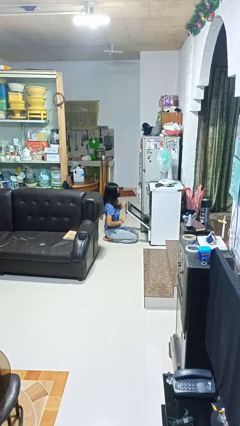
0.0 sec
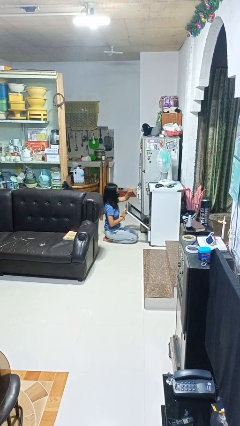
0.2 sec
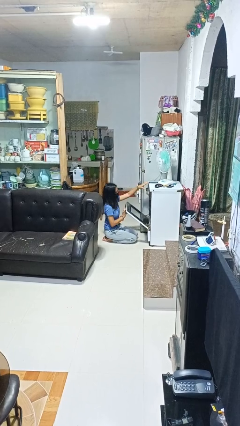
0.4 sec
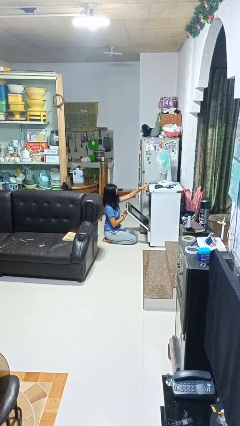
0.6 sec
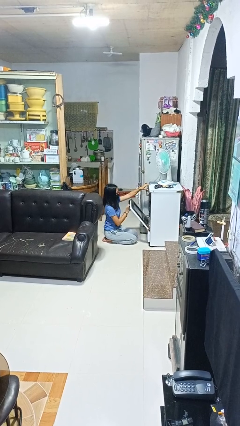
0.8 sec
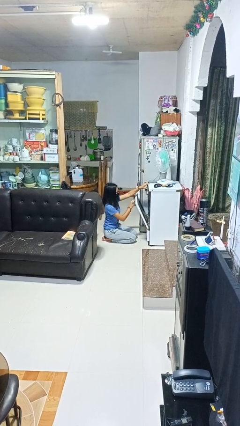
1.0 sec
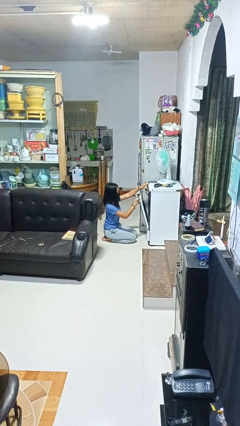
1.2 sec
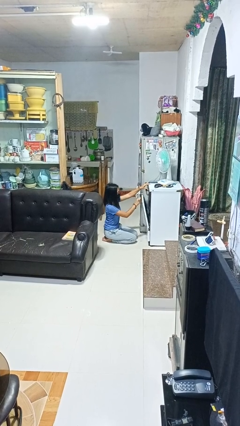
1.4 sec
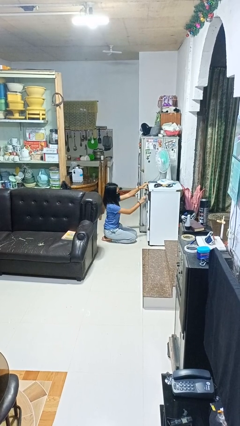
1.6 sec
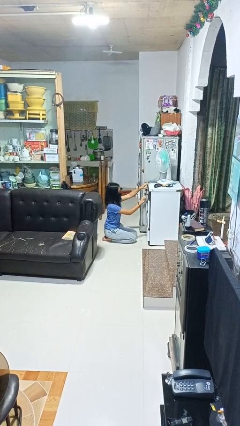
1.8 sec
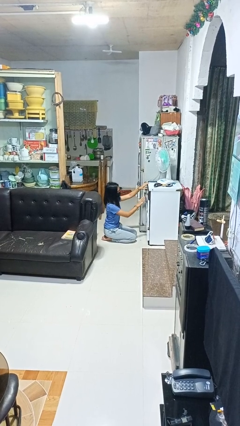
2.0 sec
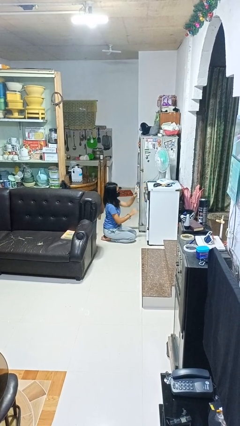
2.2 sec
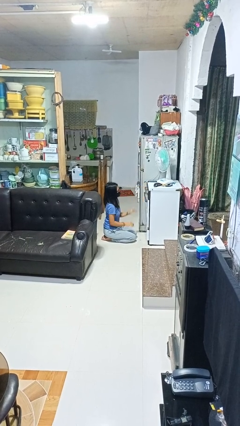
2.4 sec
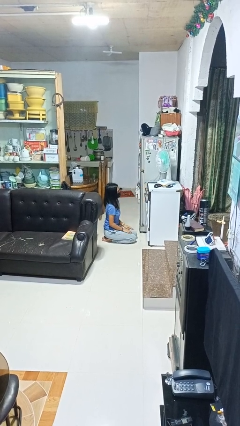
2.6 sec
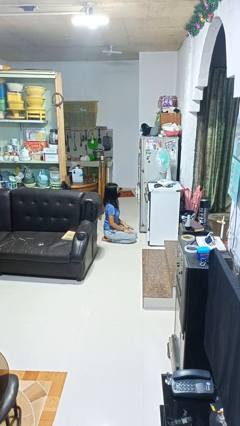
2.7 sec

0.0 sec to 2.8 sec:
person closes oven door

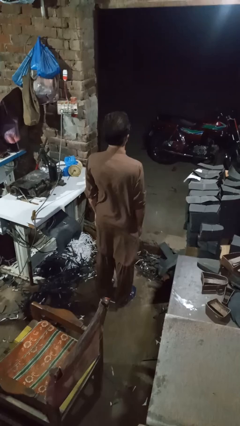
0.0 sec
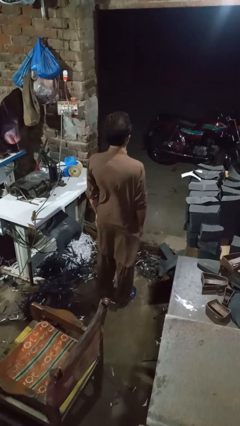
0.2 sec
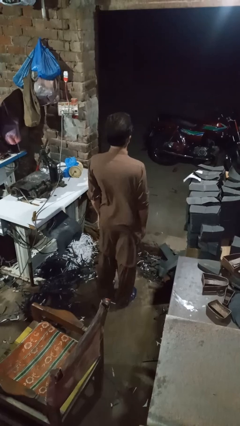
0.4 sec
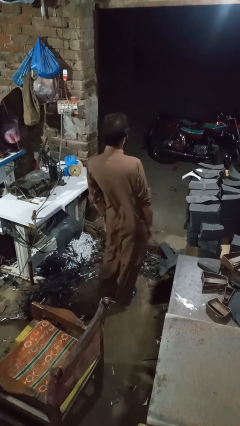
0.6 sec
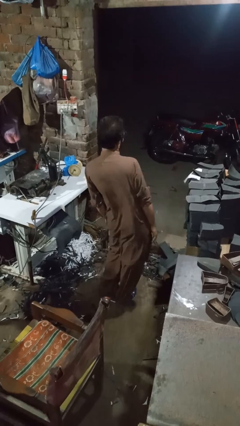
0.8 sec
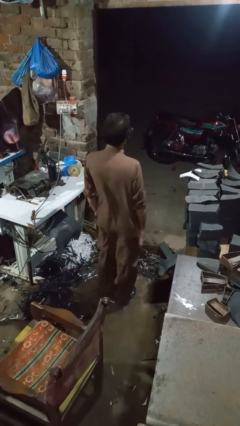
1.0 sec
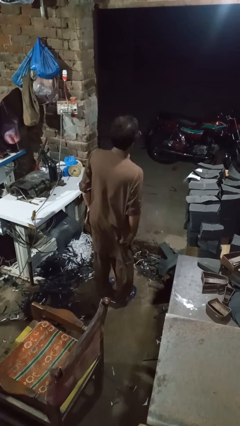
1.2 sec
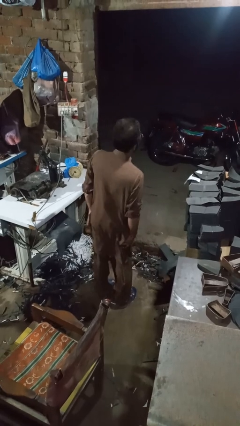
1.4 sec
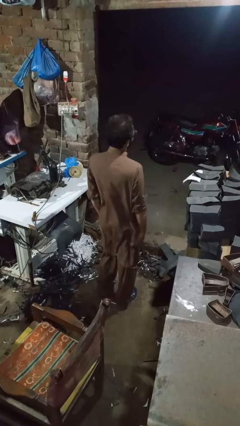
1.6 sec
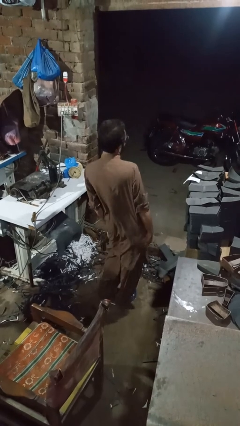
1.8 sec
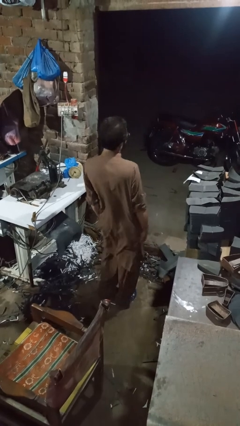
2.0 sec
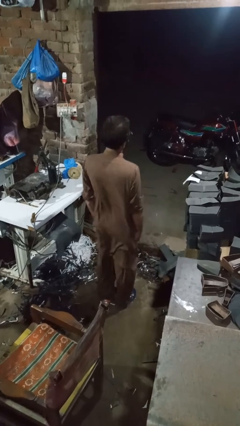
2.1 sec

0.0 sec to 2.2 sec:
person wiggles hips

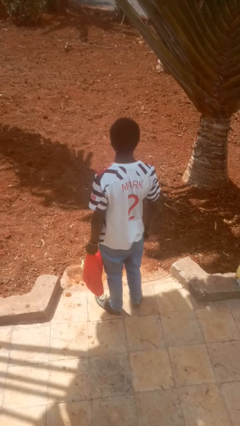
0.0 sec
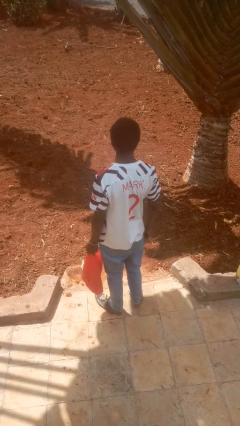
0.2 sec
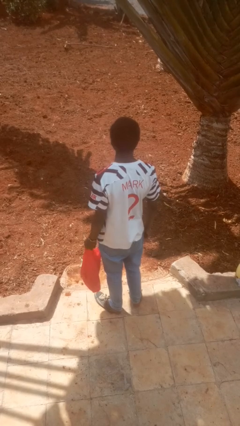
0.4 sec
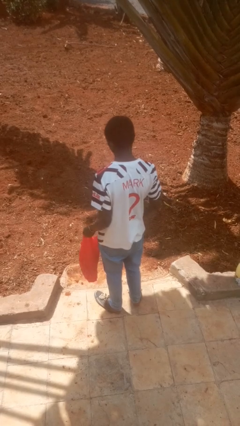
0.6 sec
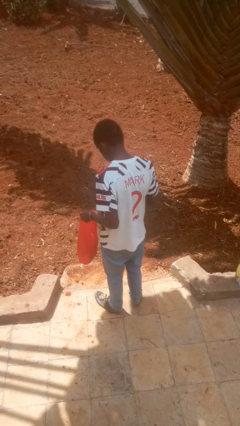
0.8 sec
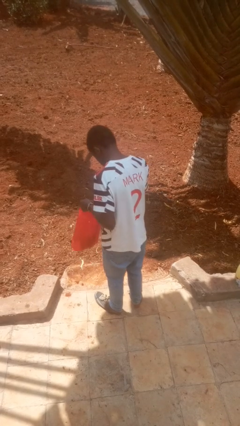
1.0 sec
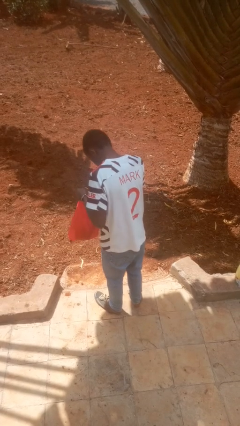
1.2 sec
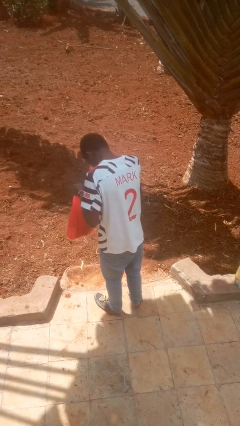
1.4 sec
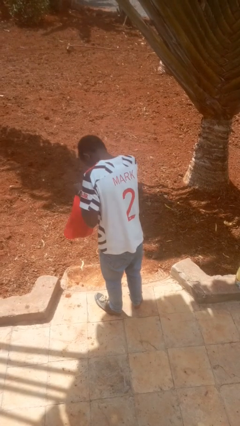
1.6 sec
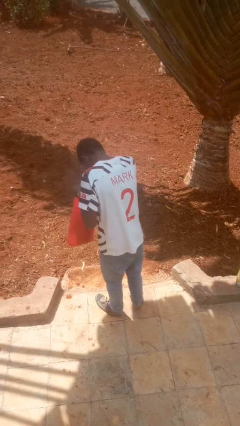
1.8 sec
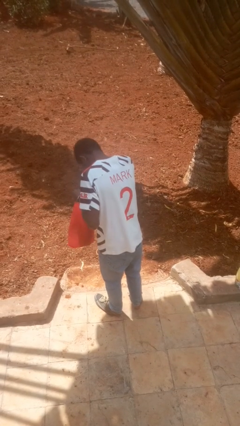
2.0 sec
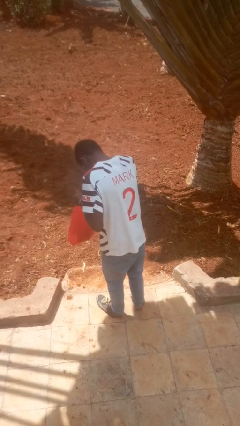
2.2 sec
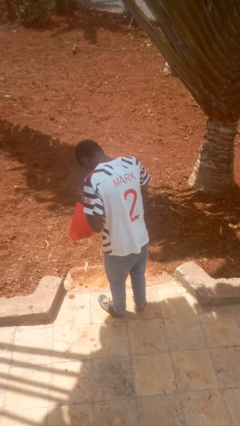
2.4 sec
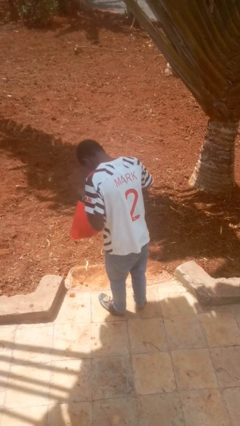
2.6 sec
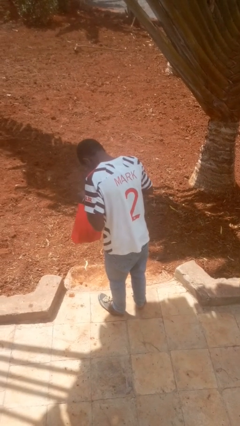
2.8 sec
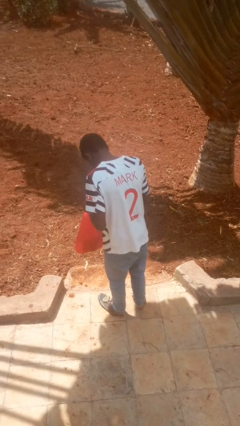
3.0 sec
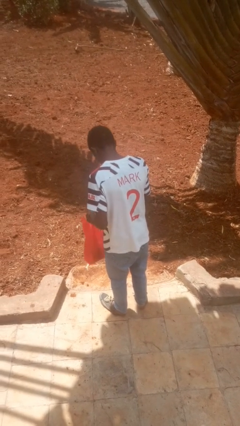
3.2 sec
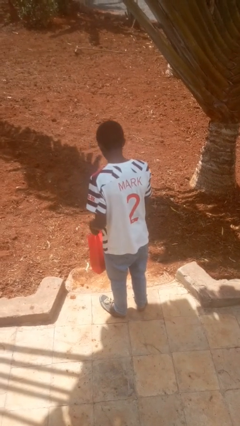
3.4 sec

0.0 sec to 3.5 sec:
person searches in bag

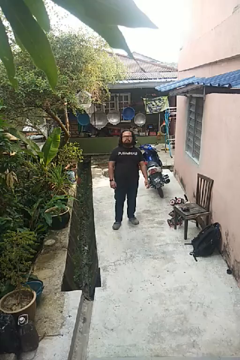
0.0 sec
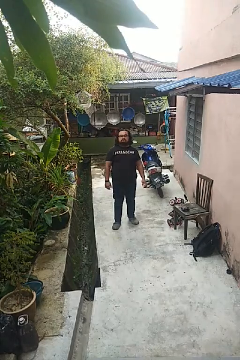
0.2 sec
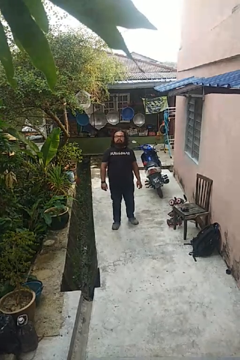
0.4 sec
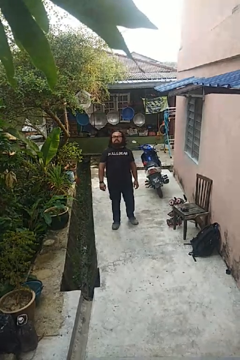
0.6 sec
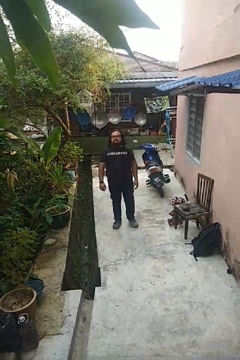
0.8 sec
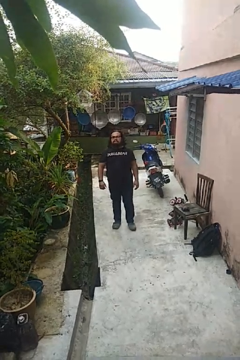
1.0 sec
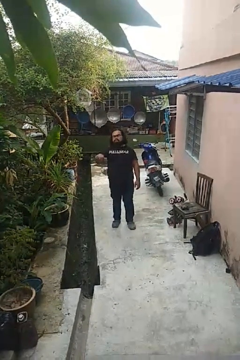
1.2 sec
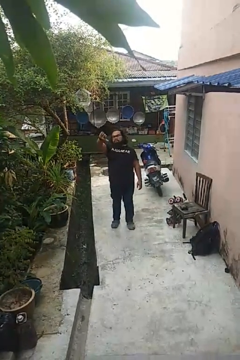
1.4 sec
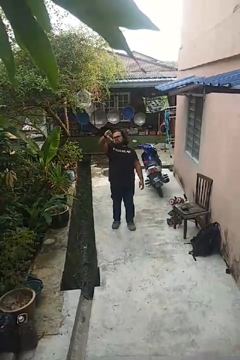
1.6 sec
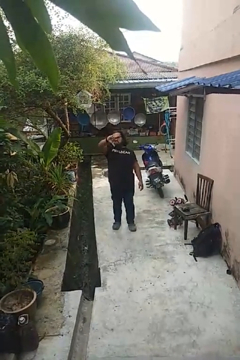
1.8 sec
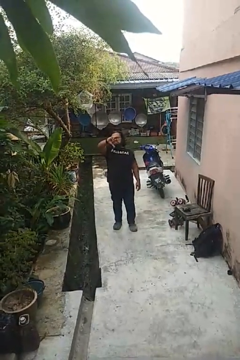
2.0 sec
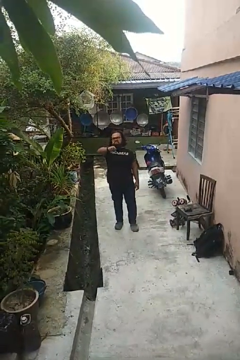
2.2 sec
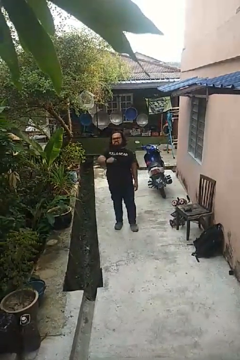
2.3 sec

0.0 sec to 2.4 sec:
person gestures thumbs down

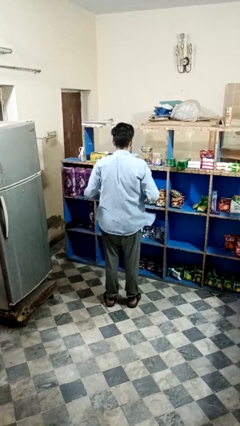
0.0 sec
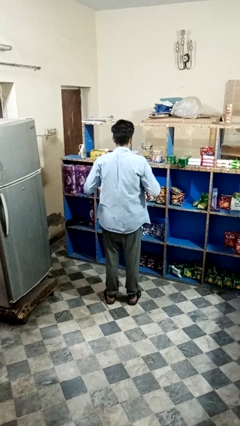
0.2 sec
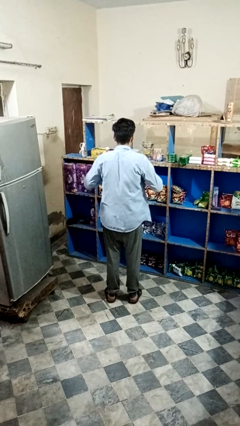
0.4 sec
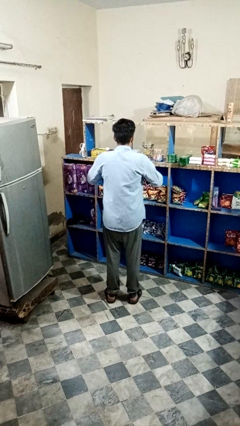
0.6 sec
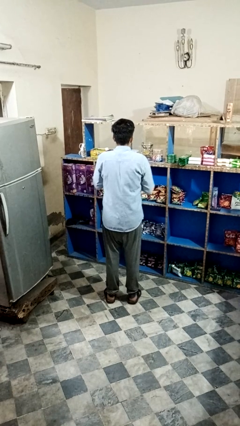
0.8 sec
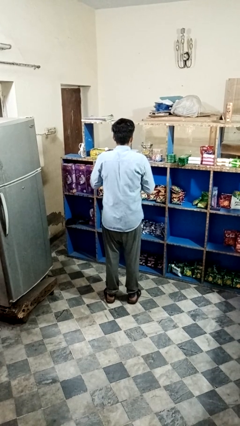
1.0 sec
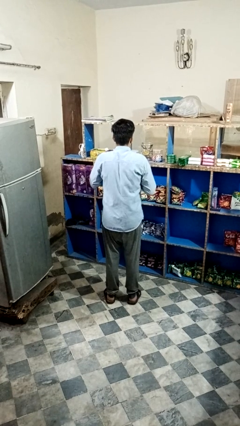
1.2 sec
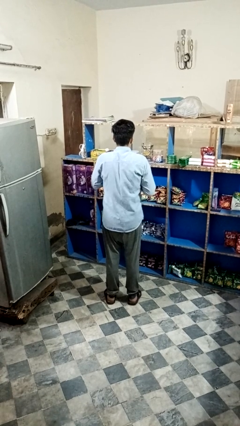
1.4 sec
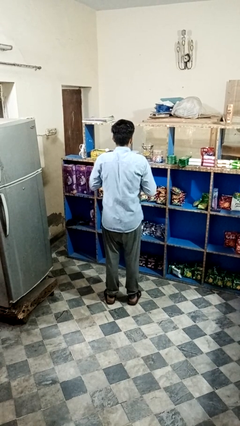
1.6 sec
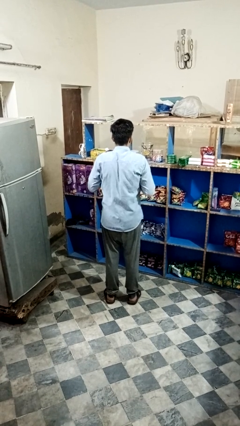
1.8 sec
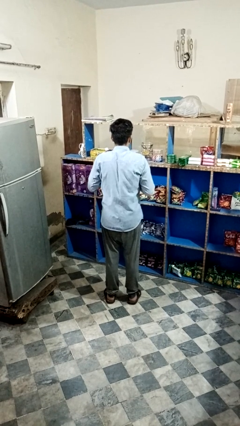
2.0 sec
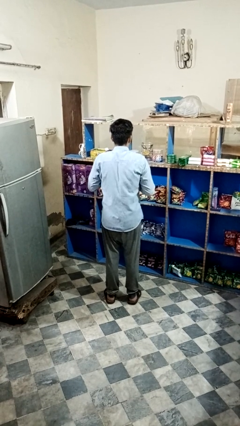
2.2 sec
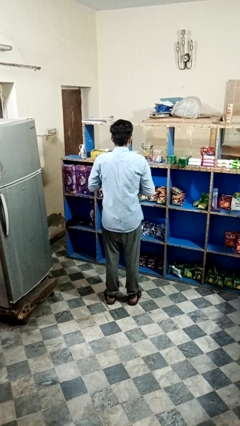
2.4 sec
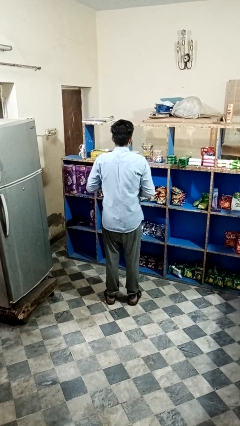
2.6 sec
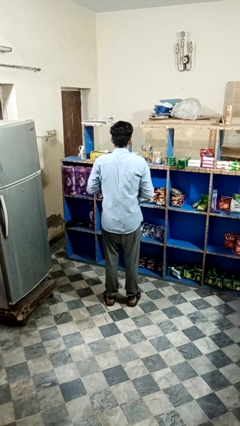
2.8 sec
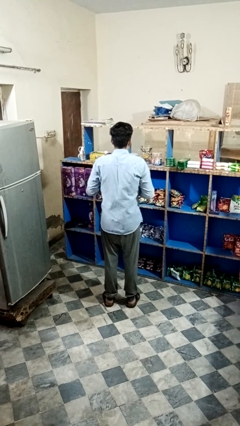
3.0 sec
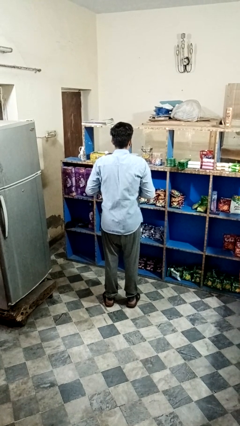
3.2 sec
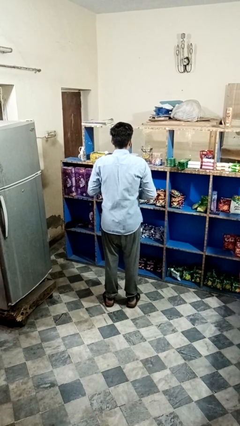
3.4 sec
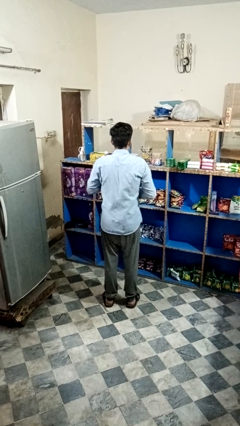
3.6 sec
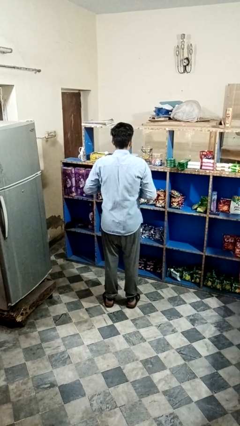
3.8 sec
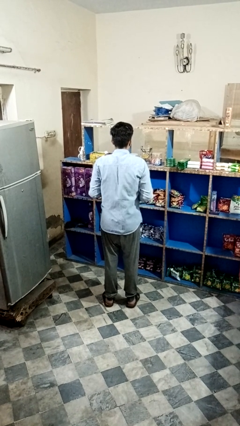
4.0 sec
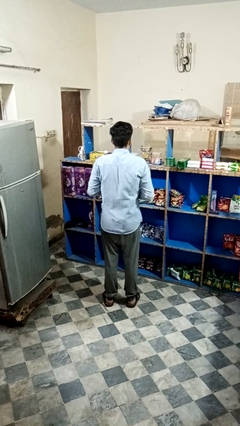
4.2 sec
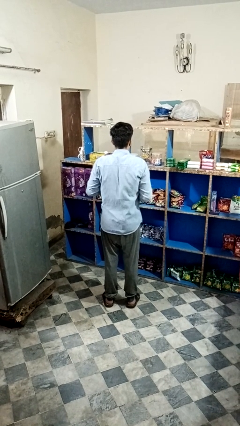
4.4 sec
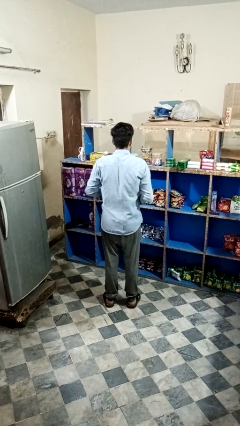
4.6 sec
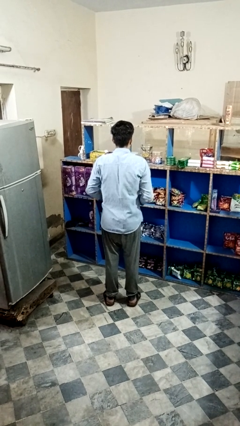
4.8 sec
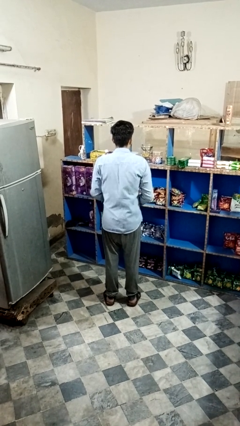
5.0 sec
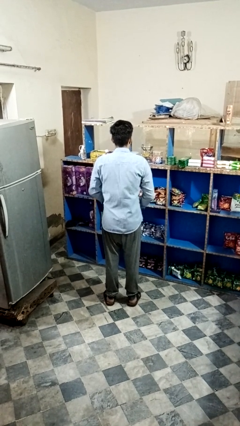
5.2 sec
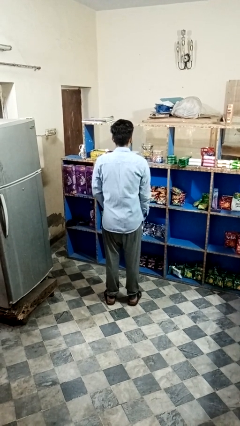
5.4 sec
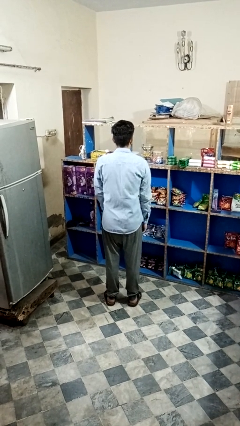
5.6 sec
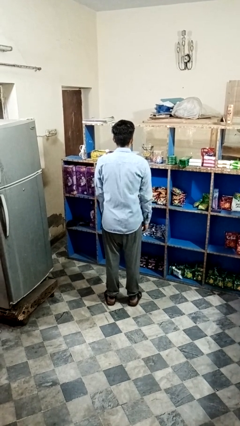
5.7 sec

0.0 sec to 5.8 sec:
person buttons shirt

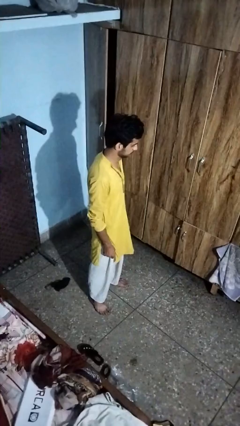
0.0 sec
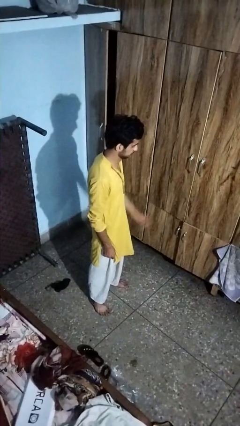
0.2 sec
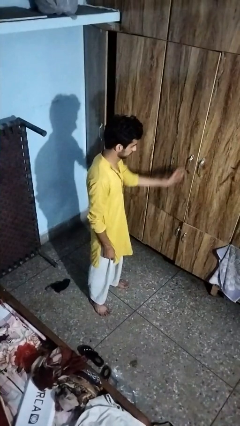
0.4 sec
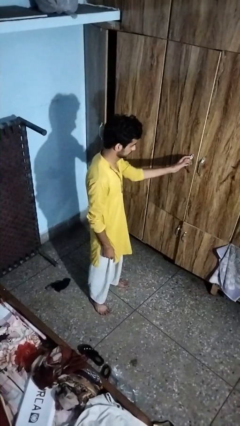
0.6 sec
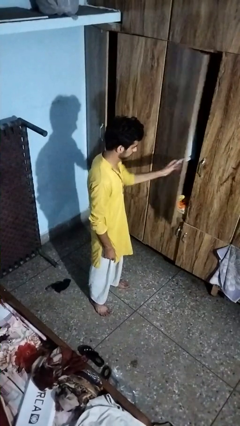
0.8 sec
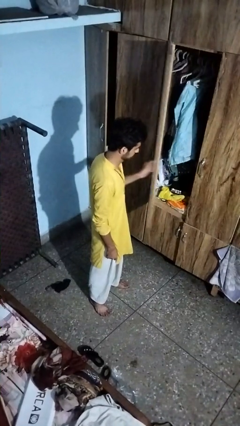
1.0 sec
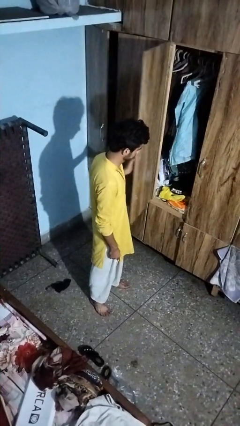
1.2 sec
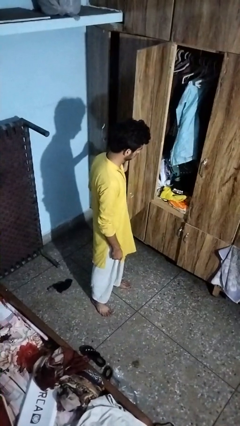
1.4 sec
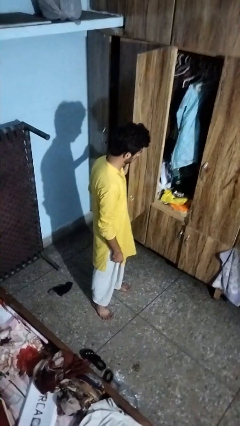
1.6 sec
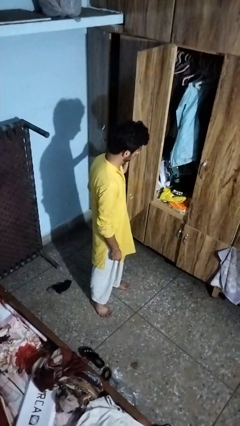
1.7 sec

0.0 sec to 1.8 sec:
person opens closet door

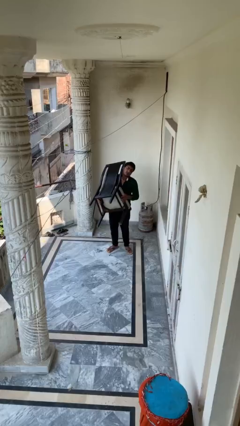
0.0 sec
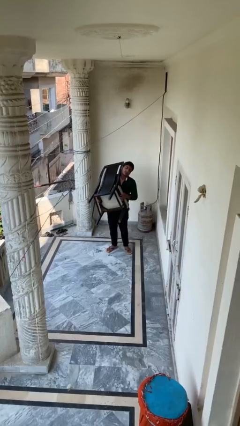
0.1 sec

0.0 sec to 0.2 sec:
person carries heavy object
